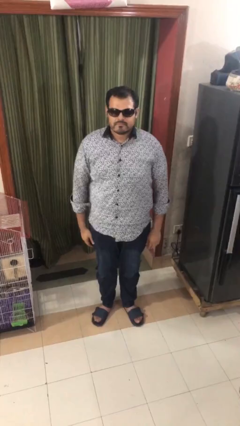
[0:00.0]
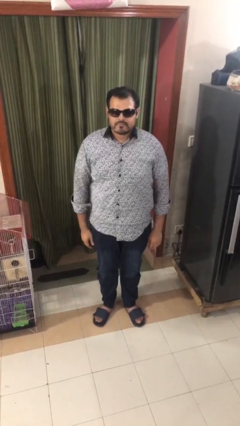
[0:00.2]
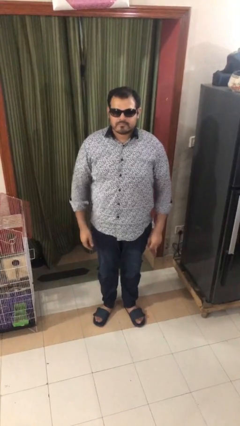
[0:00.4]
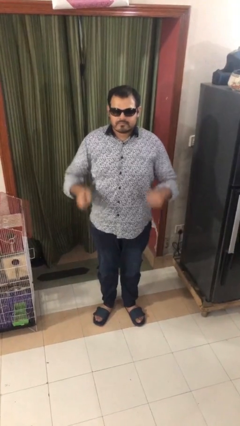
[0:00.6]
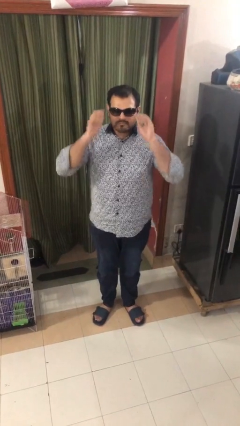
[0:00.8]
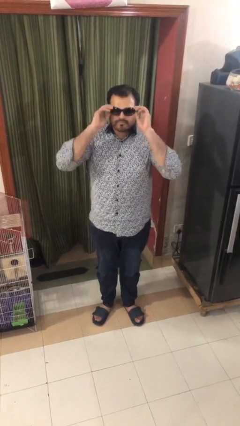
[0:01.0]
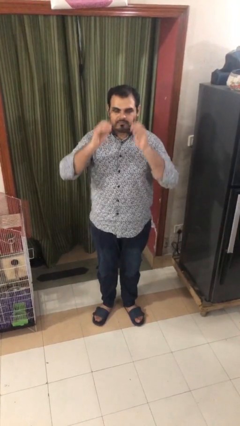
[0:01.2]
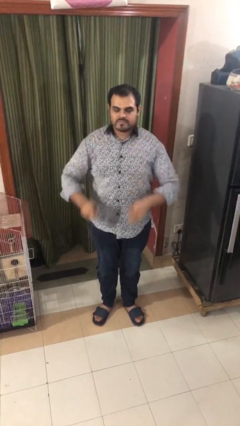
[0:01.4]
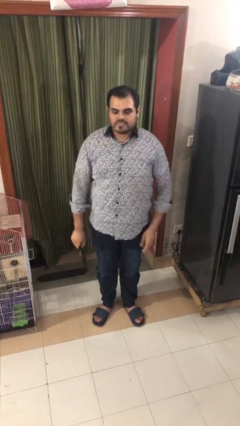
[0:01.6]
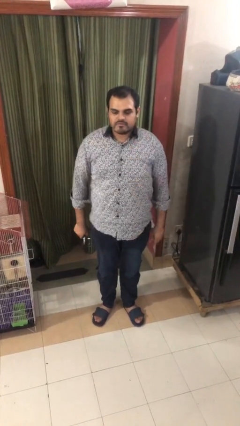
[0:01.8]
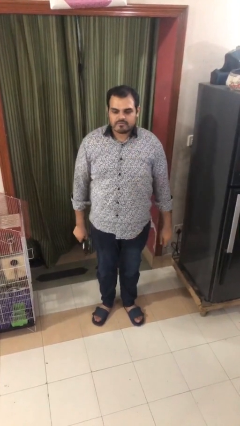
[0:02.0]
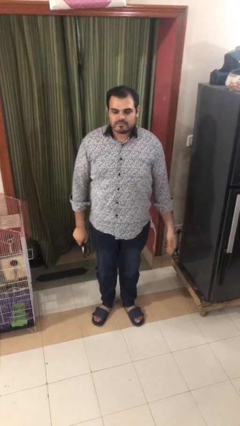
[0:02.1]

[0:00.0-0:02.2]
person takes off sunglasses

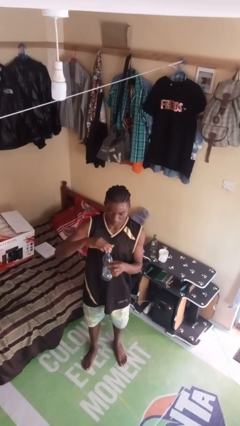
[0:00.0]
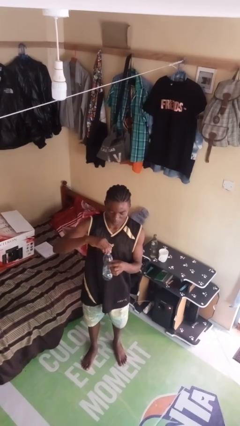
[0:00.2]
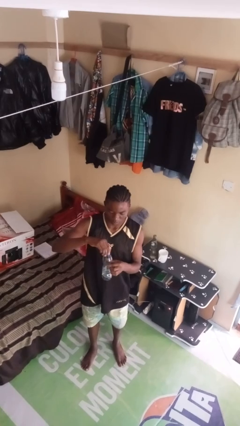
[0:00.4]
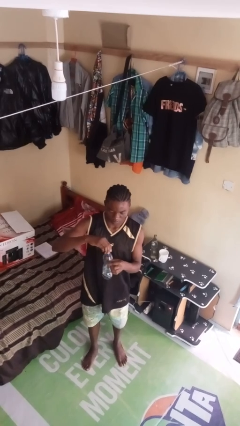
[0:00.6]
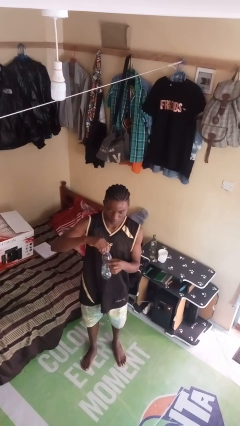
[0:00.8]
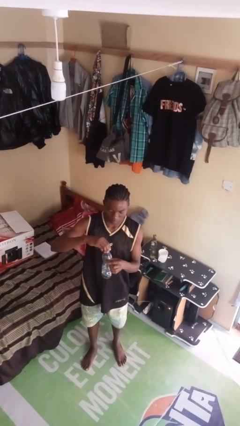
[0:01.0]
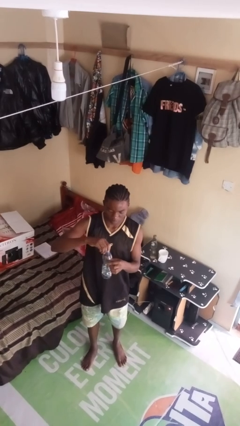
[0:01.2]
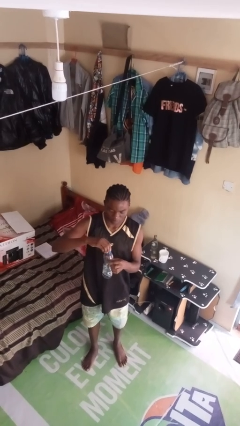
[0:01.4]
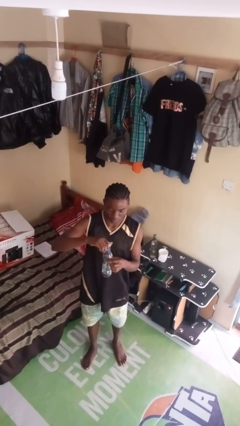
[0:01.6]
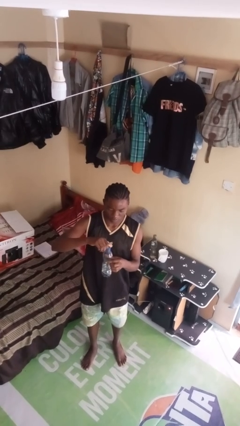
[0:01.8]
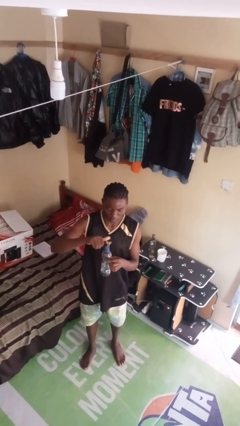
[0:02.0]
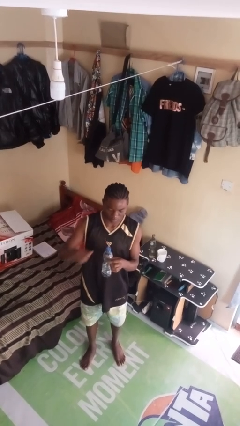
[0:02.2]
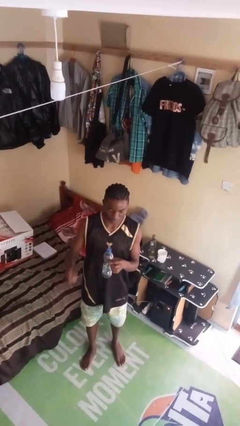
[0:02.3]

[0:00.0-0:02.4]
person screws lid to bottle

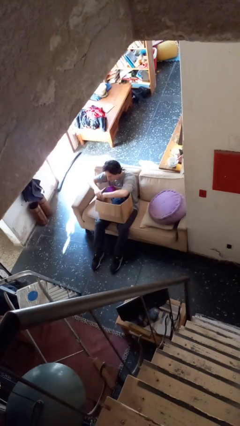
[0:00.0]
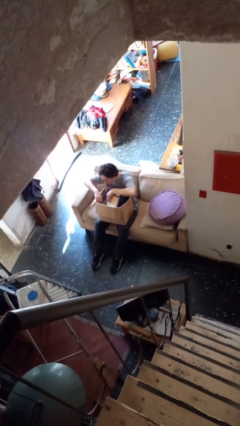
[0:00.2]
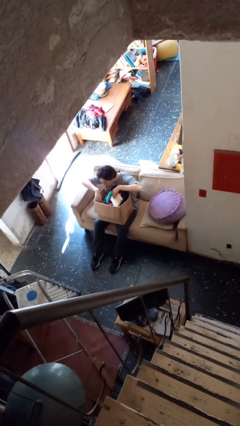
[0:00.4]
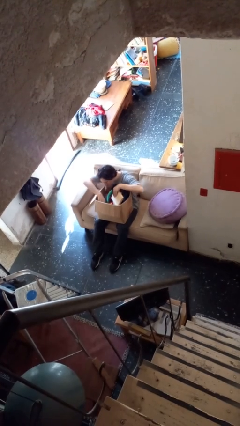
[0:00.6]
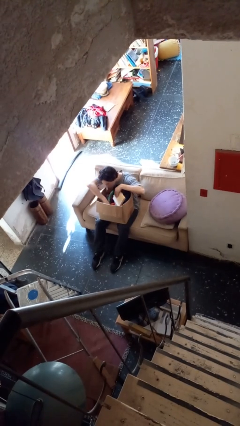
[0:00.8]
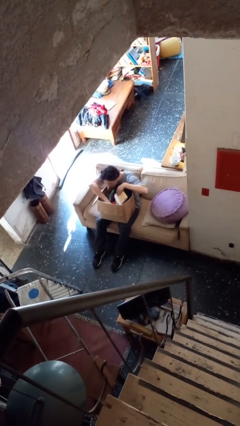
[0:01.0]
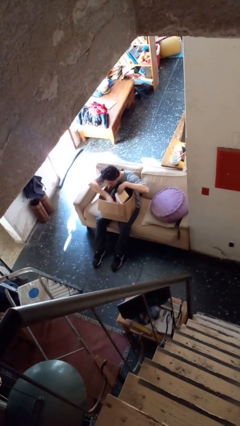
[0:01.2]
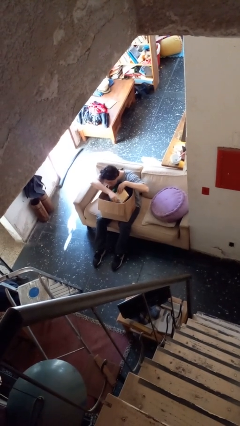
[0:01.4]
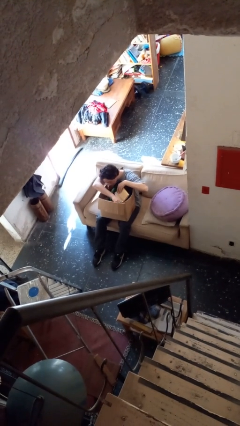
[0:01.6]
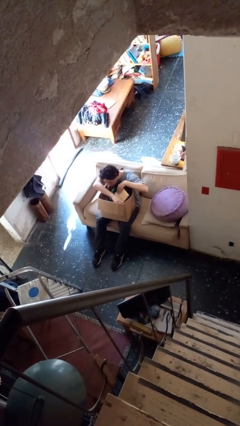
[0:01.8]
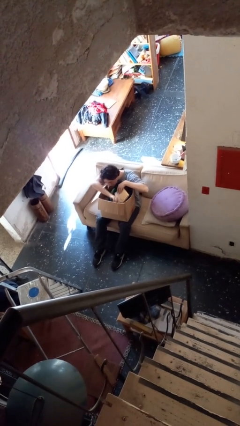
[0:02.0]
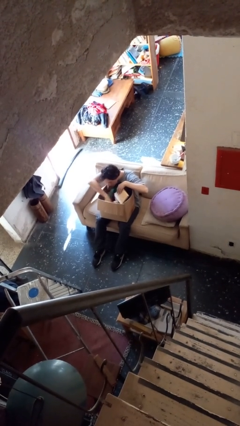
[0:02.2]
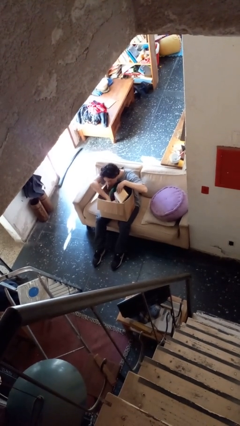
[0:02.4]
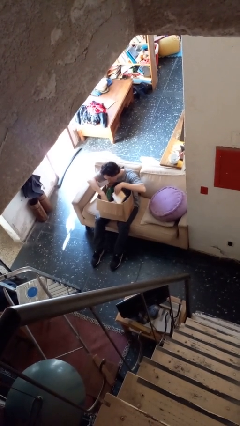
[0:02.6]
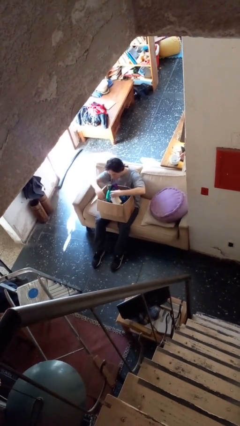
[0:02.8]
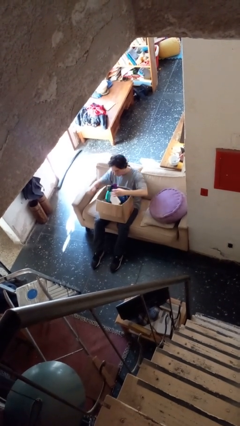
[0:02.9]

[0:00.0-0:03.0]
person searches in box

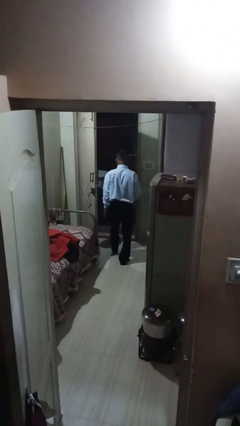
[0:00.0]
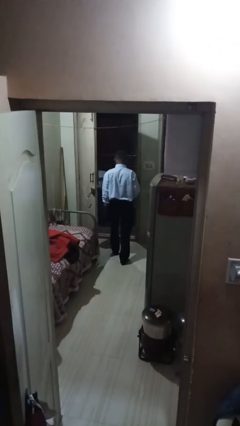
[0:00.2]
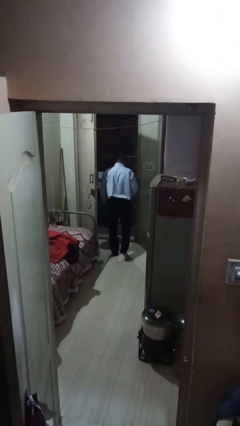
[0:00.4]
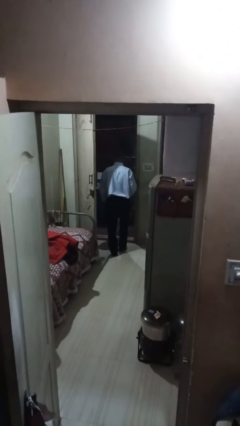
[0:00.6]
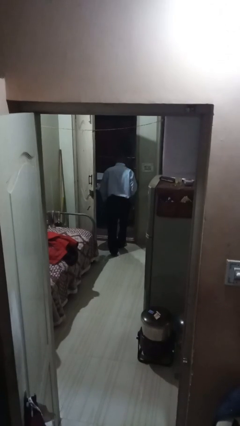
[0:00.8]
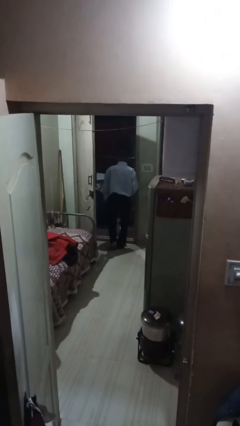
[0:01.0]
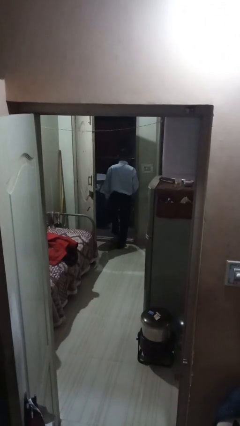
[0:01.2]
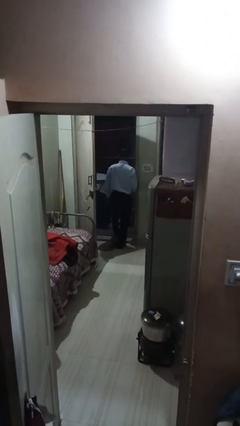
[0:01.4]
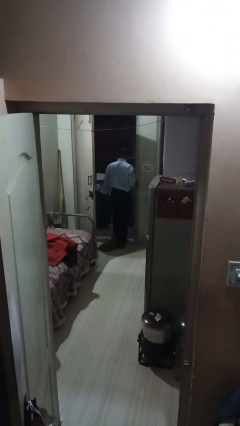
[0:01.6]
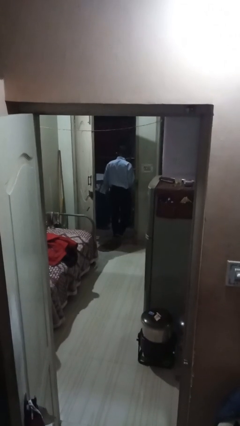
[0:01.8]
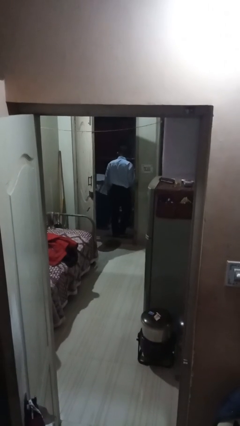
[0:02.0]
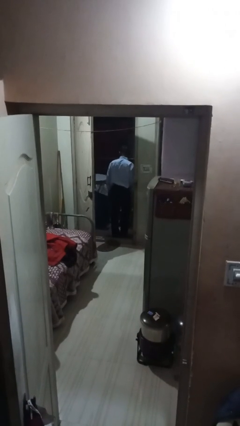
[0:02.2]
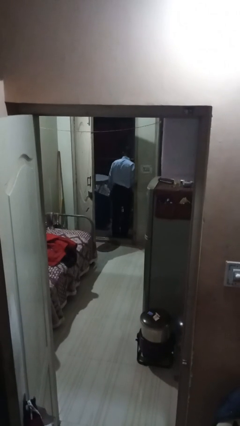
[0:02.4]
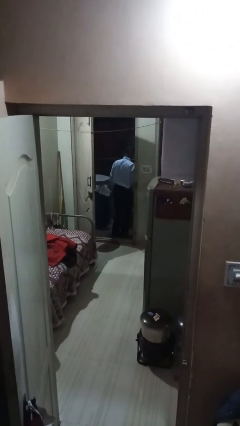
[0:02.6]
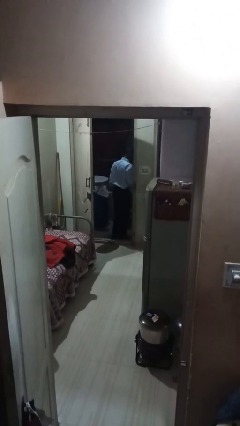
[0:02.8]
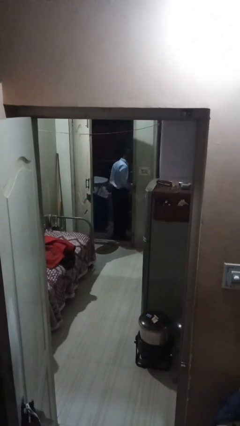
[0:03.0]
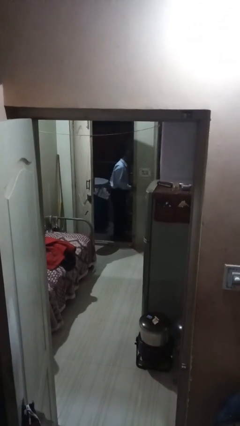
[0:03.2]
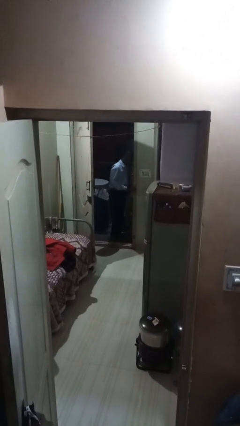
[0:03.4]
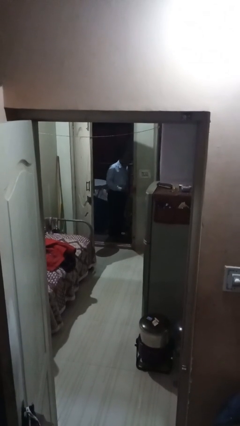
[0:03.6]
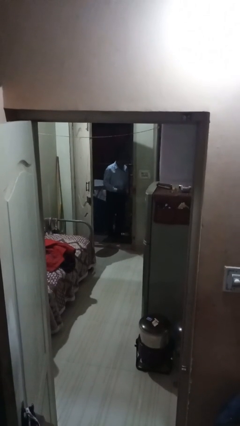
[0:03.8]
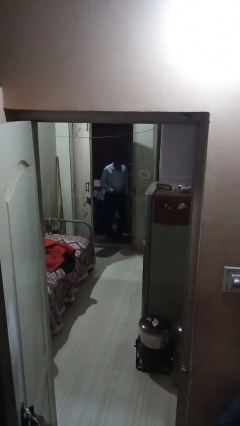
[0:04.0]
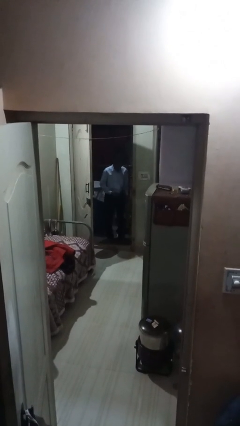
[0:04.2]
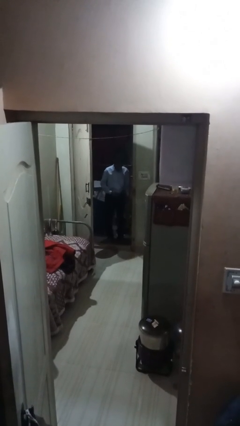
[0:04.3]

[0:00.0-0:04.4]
person exits scene through structure

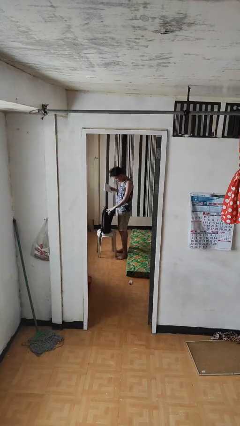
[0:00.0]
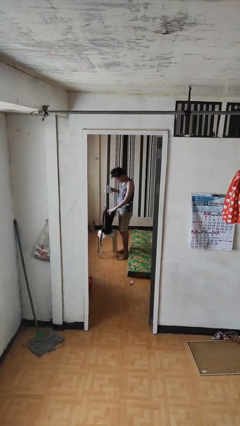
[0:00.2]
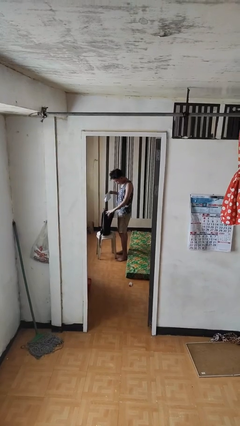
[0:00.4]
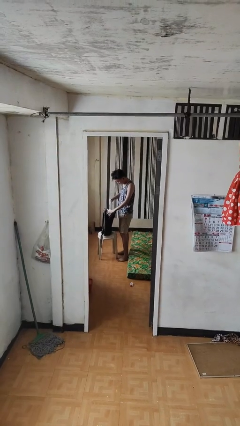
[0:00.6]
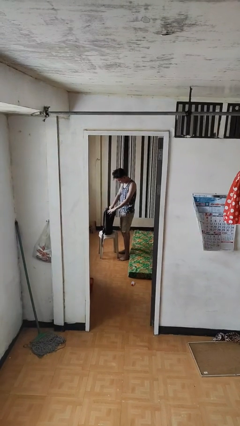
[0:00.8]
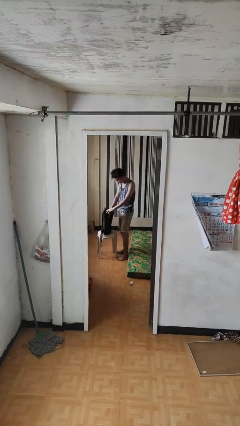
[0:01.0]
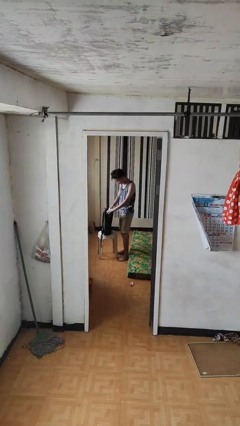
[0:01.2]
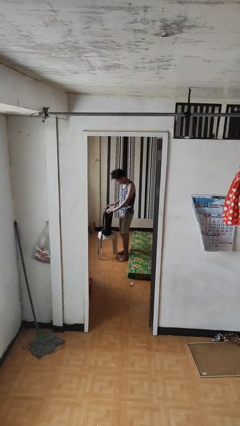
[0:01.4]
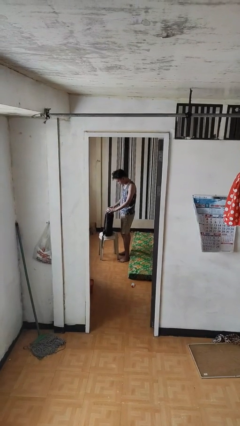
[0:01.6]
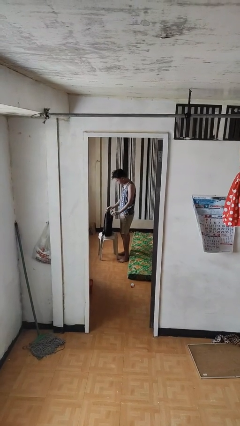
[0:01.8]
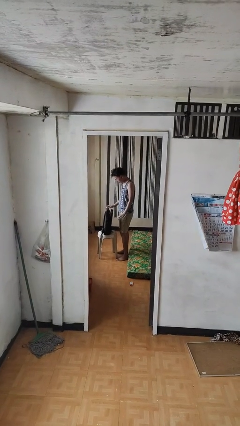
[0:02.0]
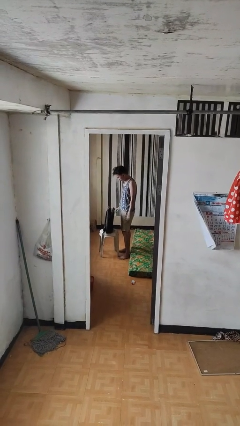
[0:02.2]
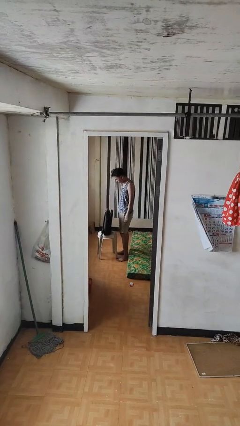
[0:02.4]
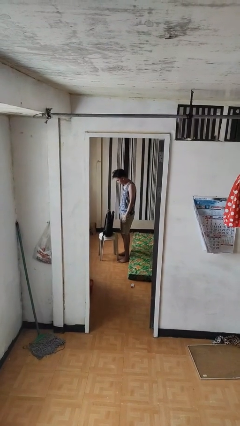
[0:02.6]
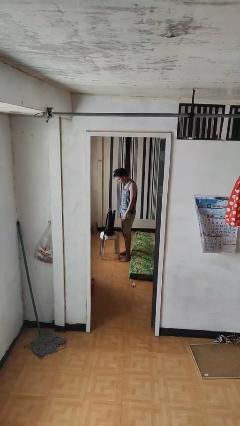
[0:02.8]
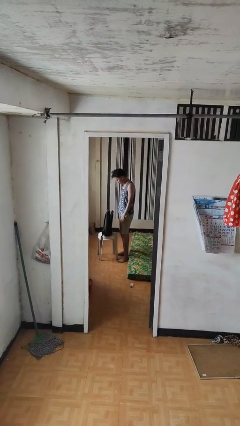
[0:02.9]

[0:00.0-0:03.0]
person puts object into backpack

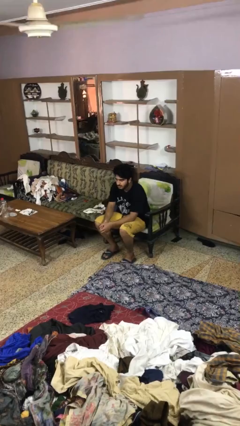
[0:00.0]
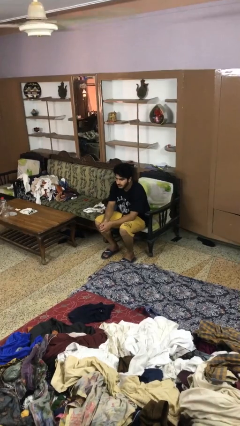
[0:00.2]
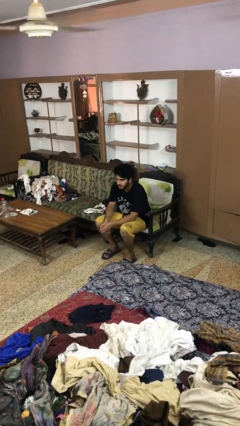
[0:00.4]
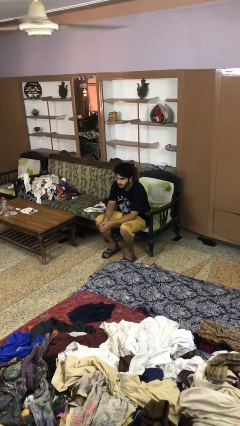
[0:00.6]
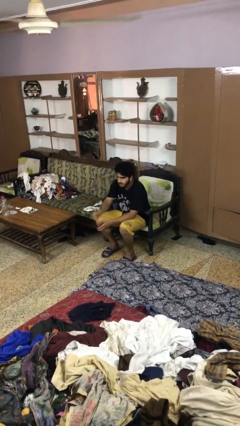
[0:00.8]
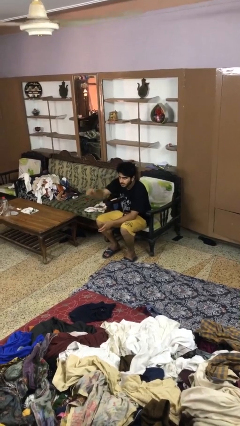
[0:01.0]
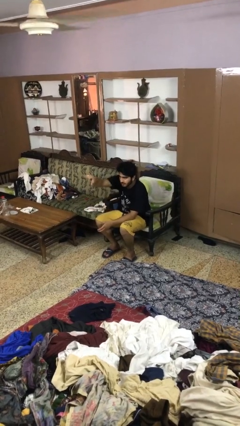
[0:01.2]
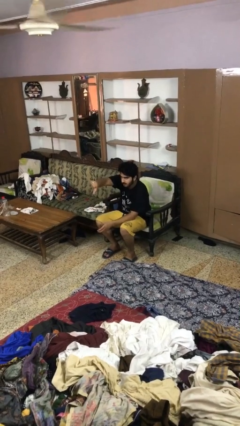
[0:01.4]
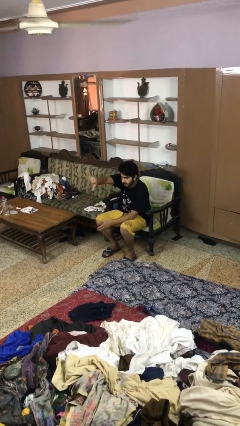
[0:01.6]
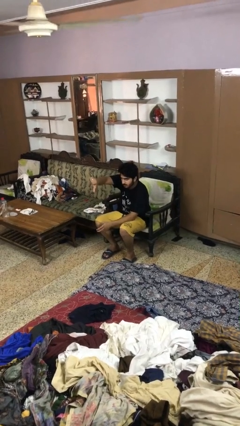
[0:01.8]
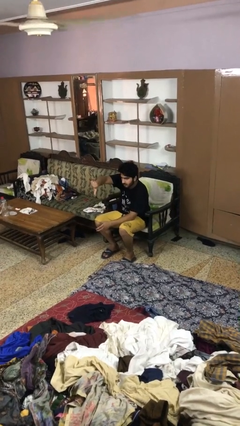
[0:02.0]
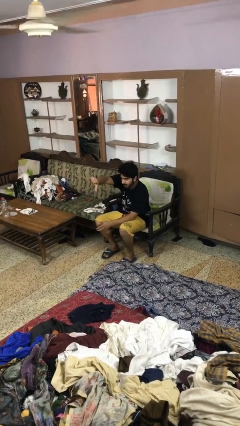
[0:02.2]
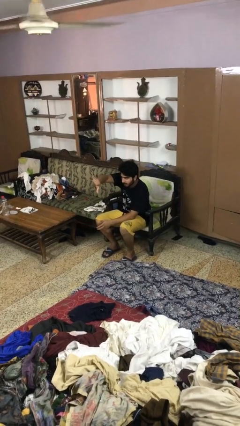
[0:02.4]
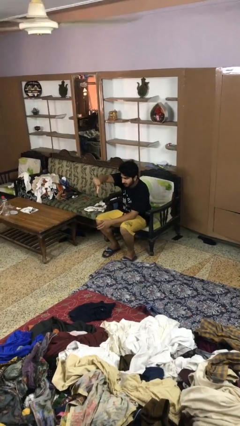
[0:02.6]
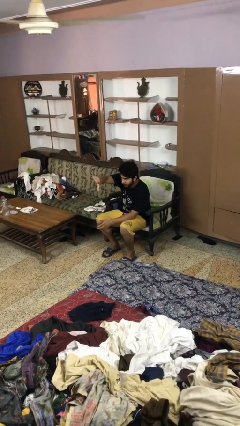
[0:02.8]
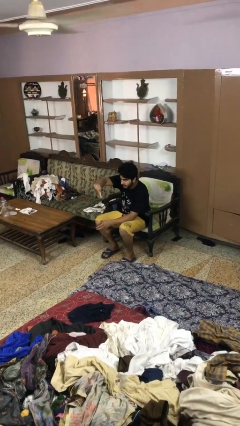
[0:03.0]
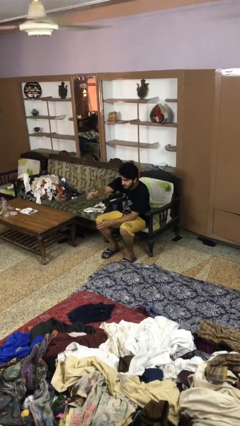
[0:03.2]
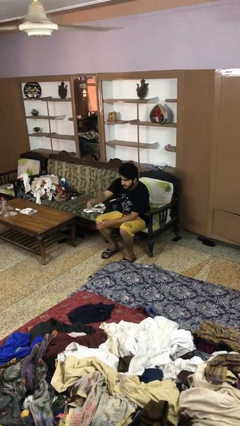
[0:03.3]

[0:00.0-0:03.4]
person gestures thumbs down
